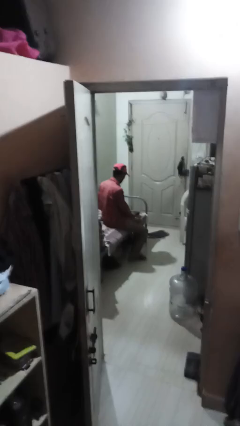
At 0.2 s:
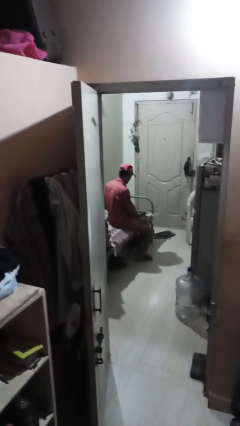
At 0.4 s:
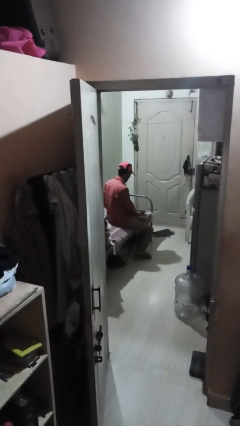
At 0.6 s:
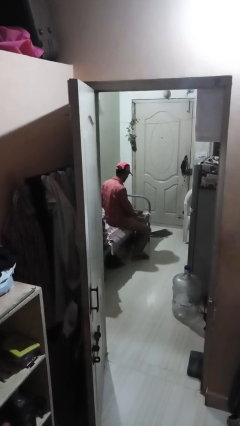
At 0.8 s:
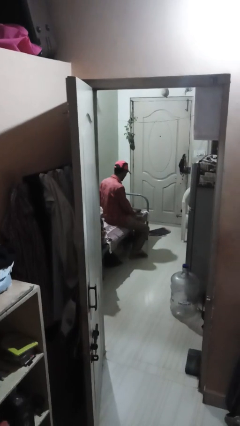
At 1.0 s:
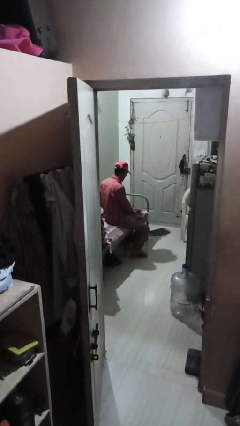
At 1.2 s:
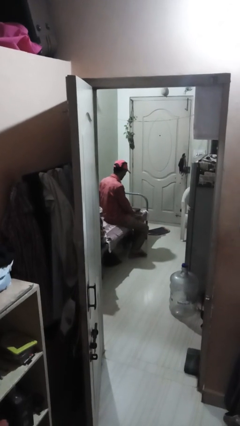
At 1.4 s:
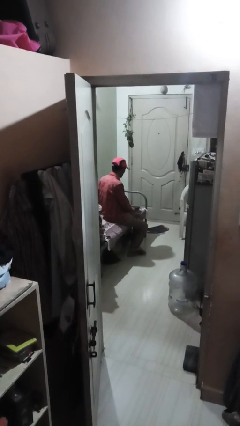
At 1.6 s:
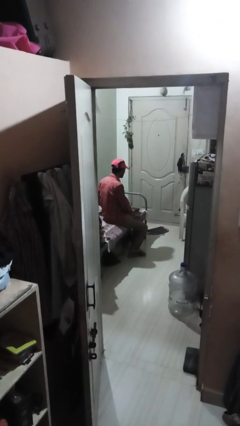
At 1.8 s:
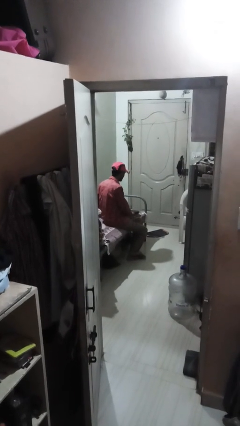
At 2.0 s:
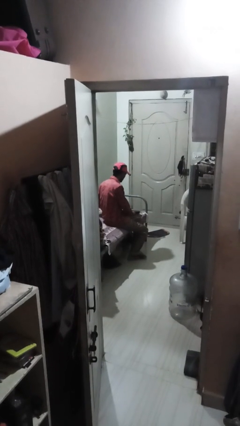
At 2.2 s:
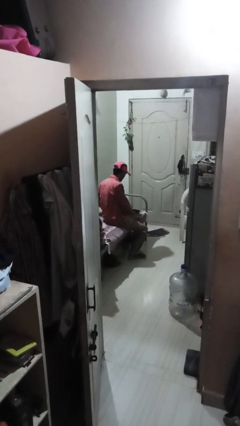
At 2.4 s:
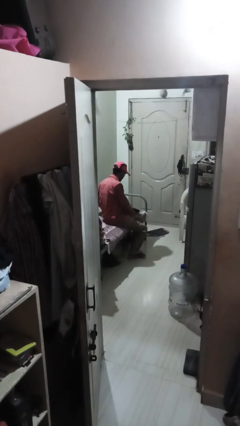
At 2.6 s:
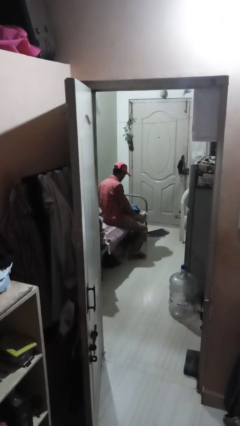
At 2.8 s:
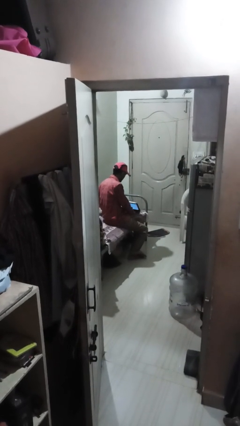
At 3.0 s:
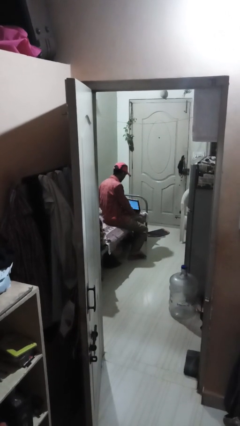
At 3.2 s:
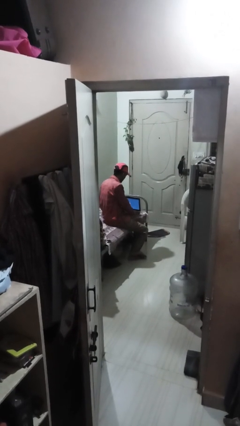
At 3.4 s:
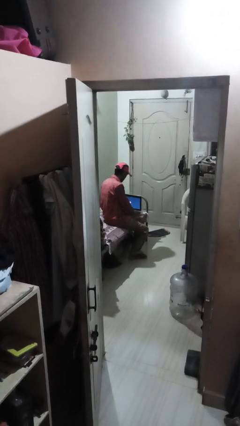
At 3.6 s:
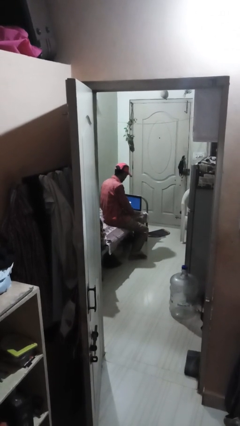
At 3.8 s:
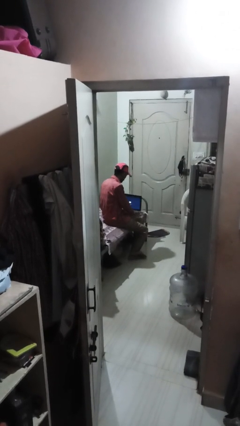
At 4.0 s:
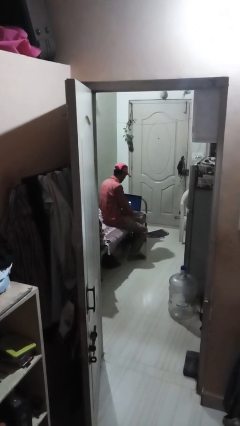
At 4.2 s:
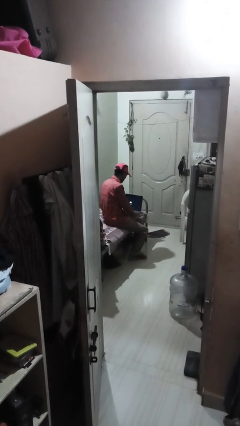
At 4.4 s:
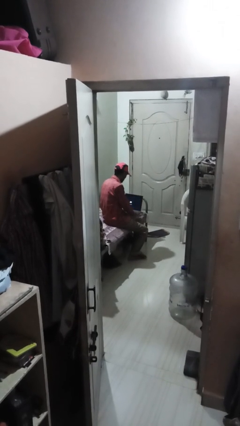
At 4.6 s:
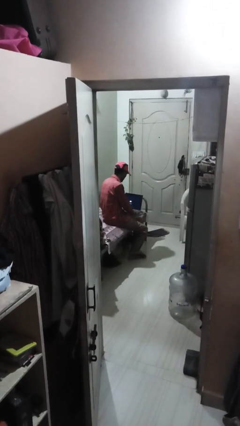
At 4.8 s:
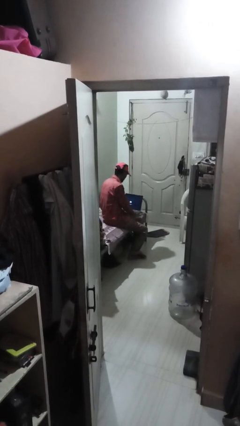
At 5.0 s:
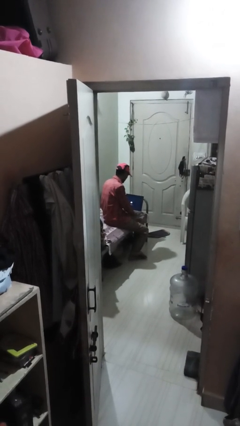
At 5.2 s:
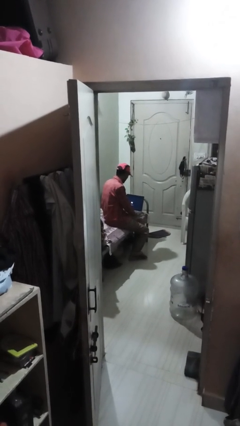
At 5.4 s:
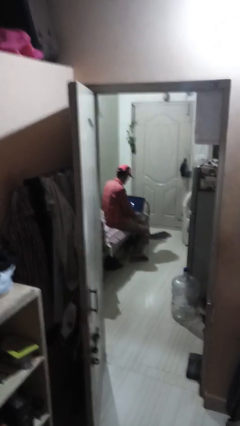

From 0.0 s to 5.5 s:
person opens laptop

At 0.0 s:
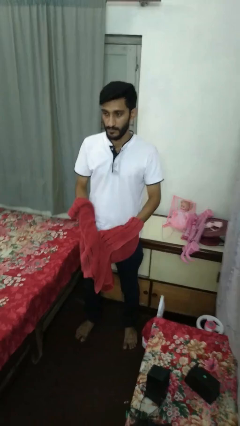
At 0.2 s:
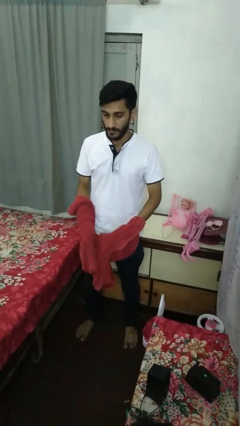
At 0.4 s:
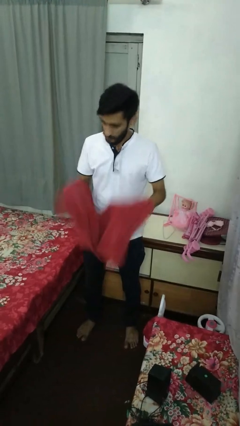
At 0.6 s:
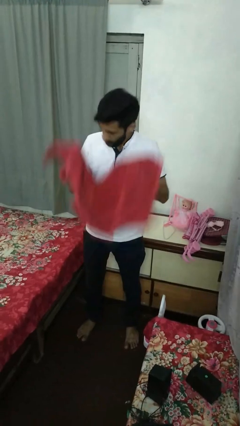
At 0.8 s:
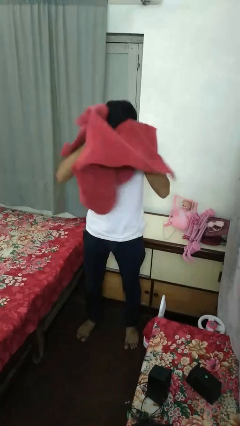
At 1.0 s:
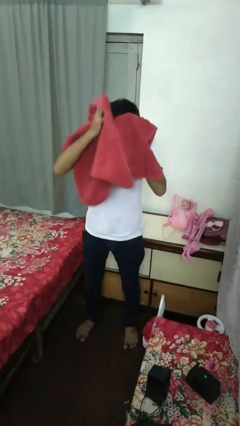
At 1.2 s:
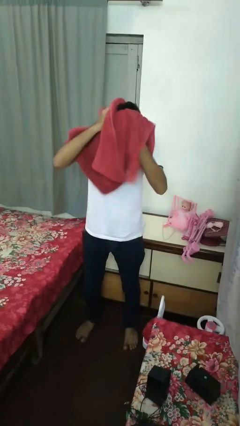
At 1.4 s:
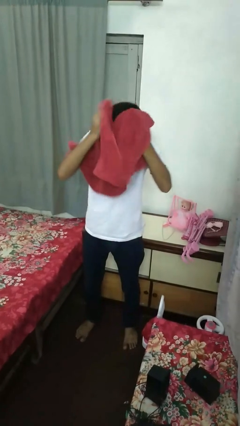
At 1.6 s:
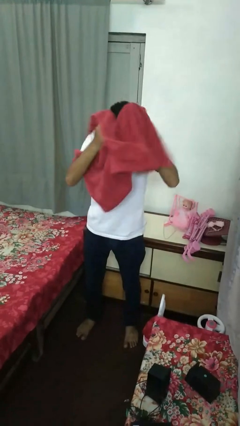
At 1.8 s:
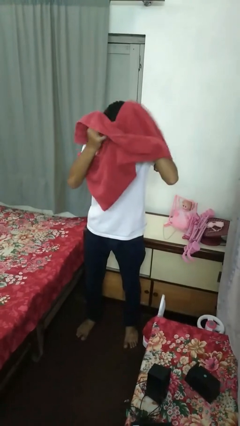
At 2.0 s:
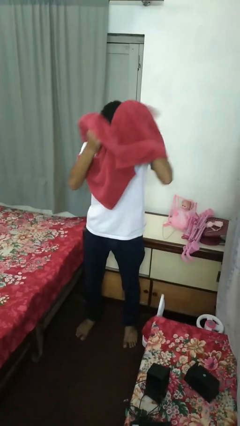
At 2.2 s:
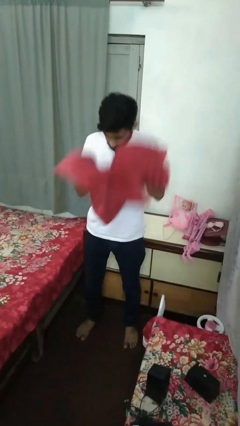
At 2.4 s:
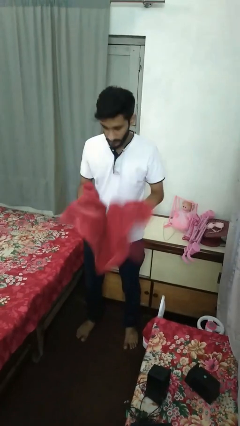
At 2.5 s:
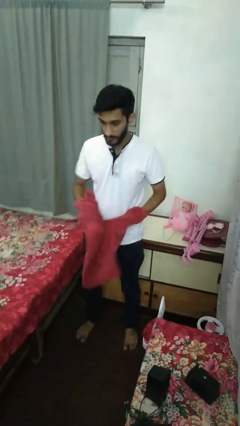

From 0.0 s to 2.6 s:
person dries hair with towel

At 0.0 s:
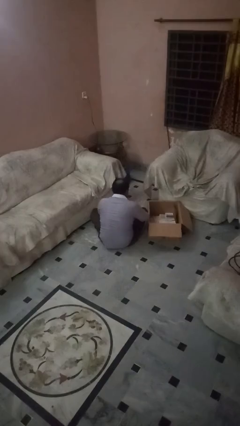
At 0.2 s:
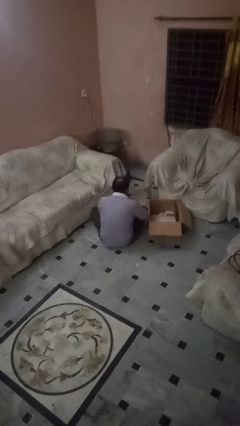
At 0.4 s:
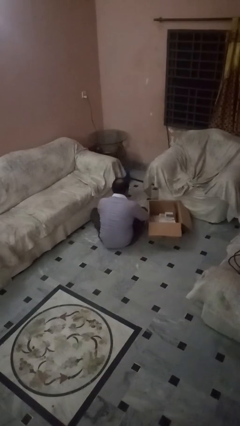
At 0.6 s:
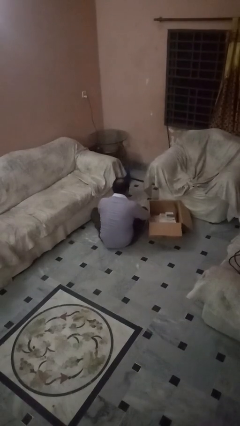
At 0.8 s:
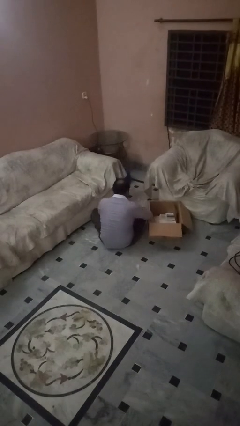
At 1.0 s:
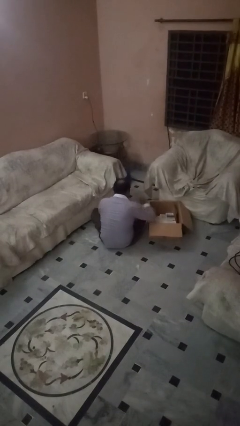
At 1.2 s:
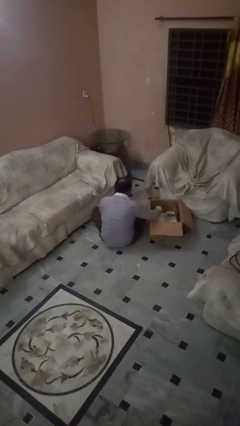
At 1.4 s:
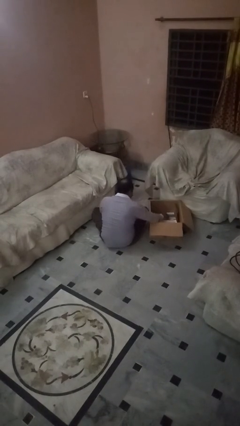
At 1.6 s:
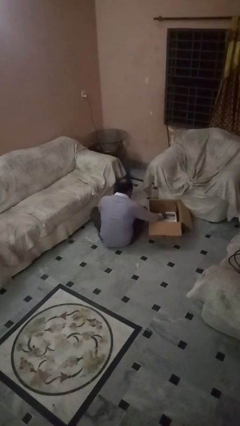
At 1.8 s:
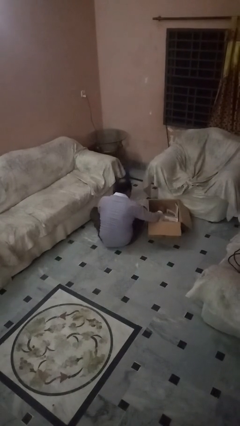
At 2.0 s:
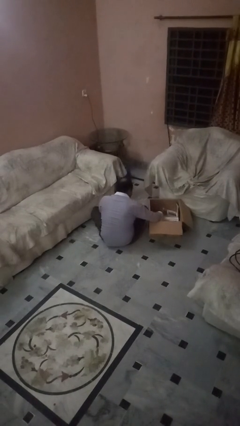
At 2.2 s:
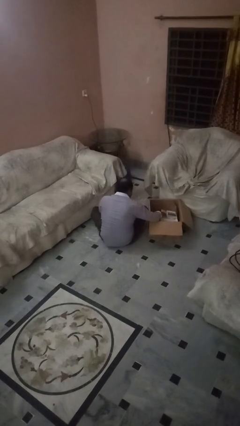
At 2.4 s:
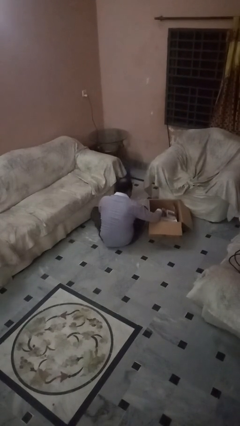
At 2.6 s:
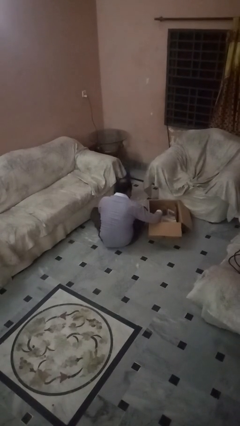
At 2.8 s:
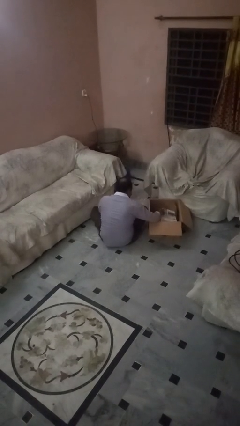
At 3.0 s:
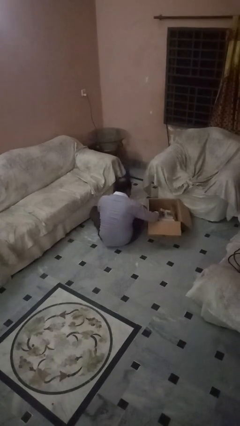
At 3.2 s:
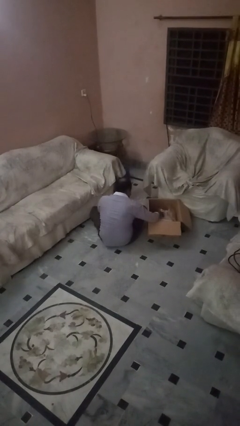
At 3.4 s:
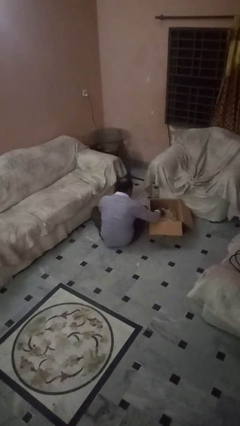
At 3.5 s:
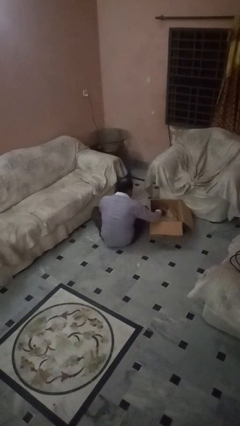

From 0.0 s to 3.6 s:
person searches in box

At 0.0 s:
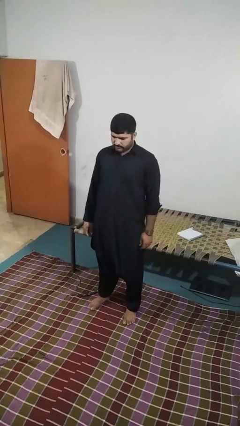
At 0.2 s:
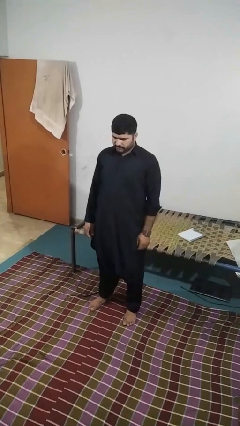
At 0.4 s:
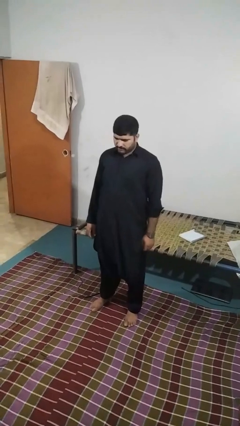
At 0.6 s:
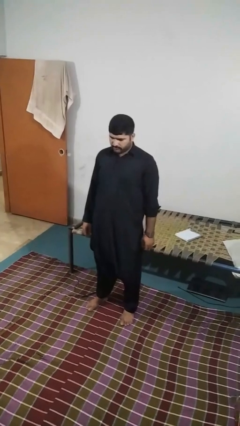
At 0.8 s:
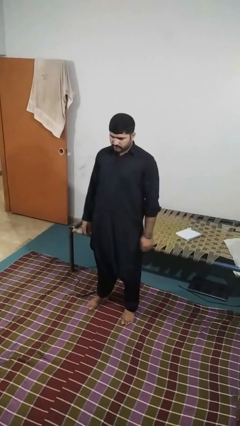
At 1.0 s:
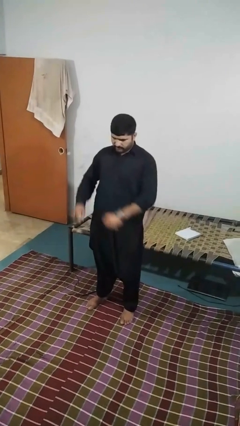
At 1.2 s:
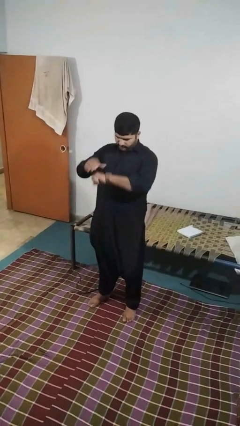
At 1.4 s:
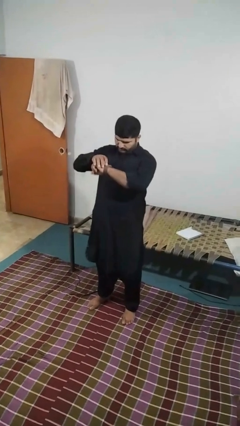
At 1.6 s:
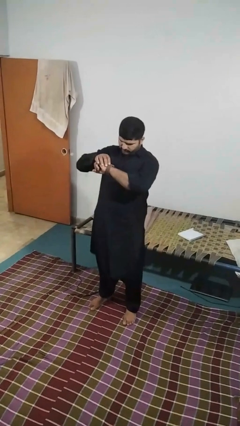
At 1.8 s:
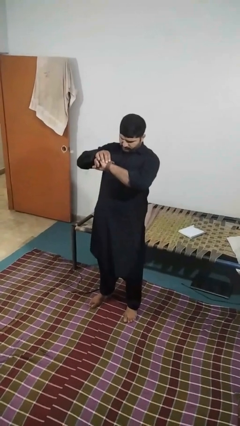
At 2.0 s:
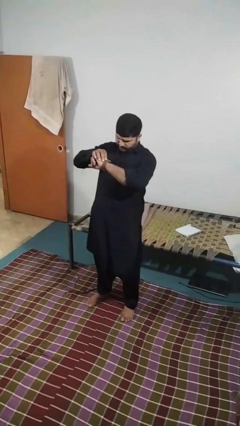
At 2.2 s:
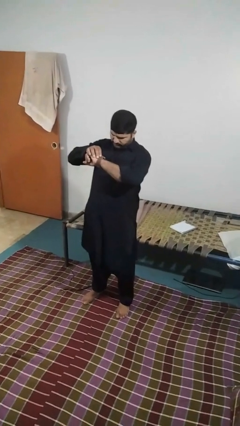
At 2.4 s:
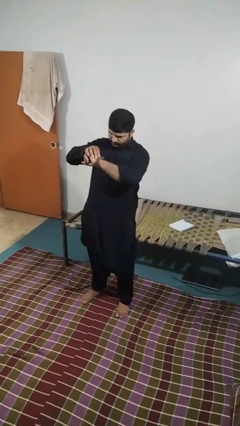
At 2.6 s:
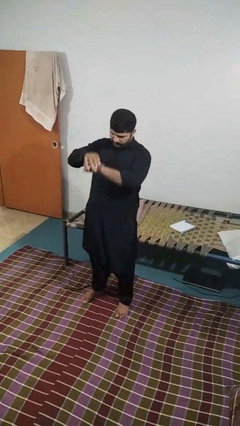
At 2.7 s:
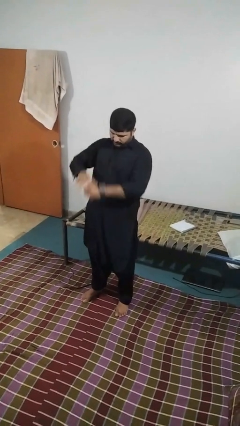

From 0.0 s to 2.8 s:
person looks at wristwatch

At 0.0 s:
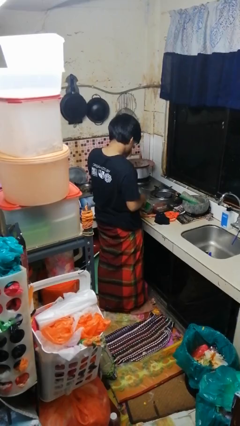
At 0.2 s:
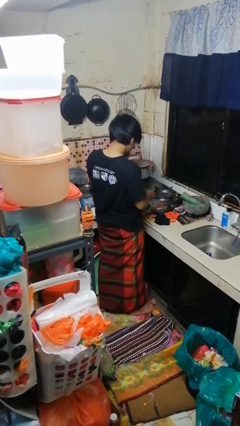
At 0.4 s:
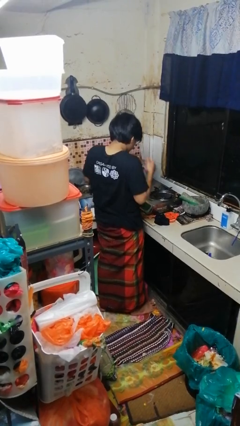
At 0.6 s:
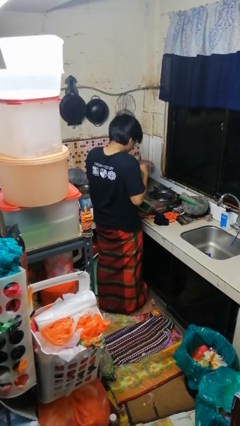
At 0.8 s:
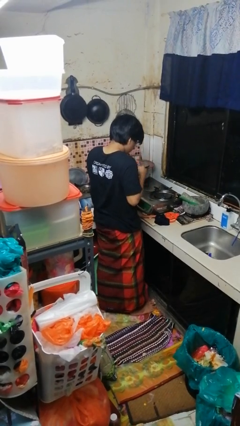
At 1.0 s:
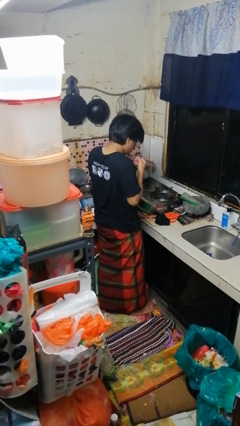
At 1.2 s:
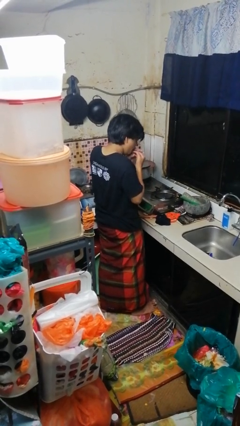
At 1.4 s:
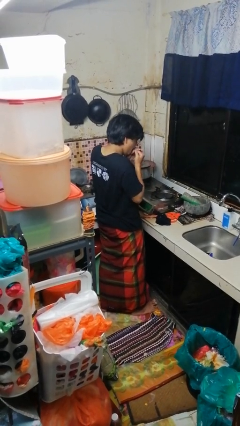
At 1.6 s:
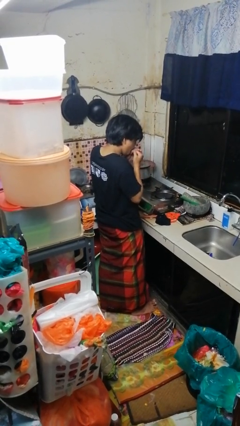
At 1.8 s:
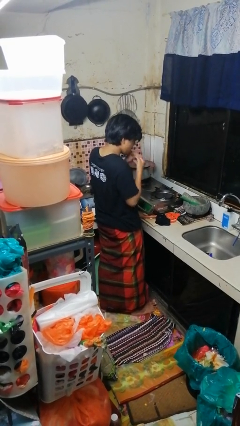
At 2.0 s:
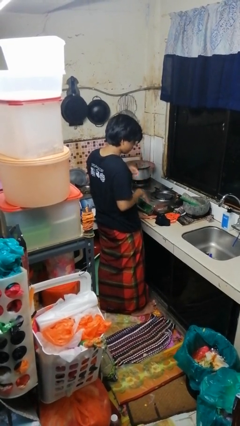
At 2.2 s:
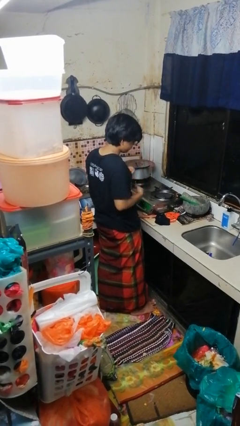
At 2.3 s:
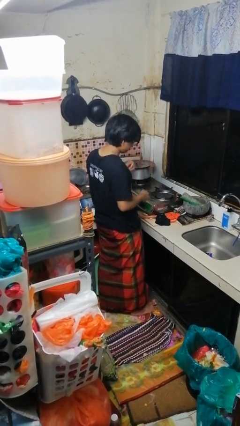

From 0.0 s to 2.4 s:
person burns hand

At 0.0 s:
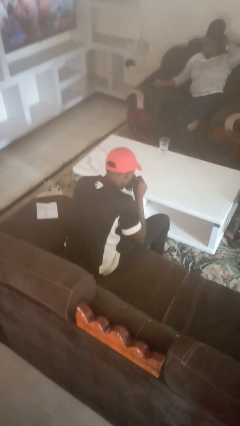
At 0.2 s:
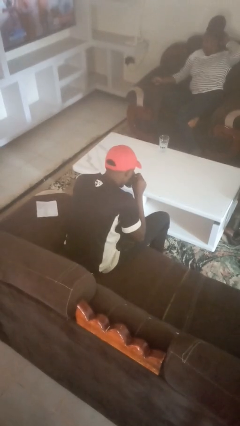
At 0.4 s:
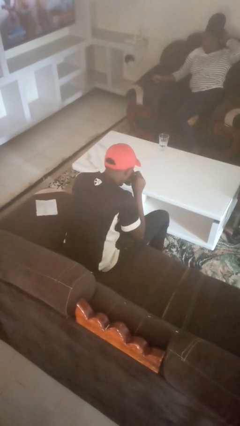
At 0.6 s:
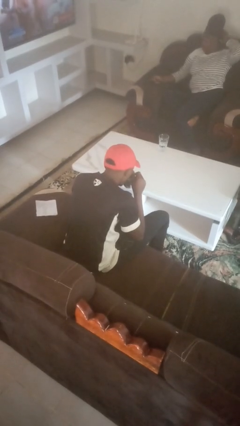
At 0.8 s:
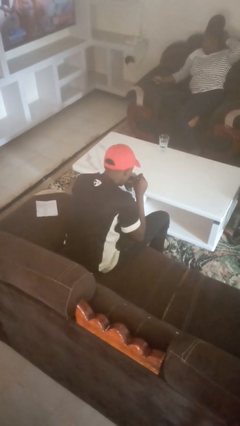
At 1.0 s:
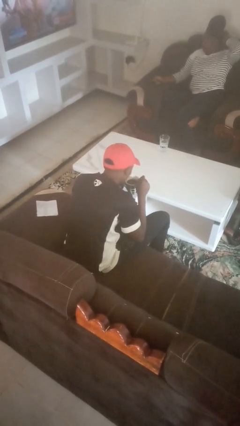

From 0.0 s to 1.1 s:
person drinks from mug
